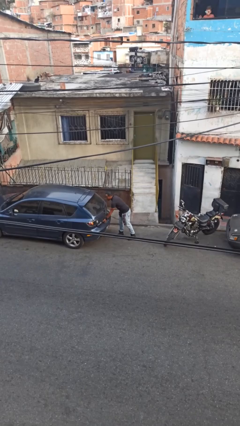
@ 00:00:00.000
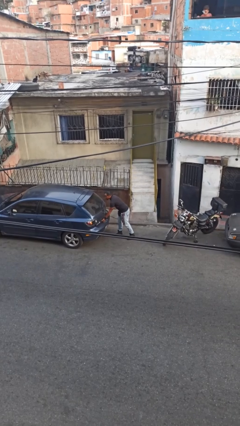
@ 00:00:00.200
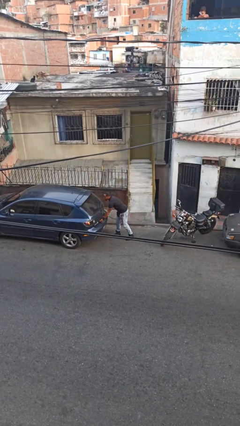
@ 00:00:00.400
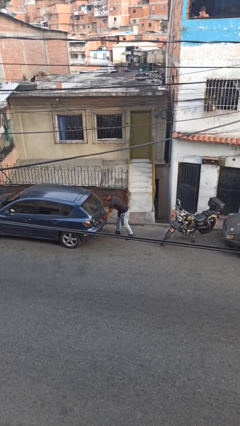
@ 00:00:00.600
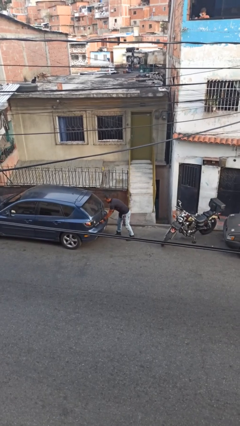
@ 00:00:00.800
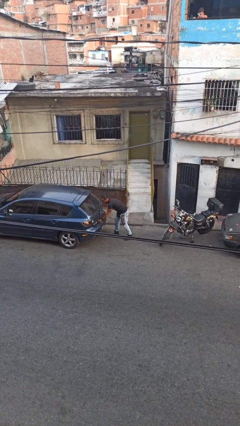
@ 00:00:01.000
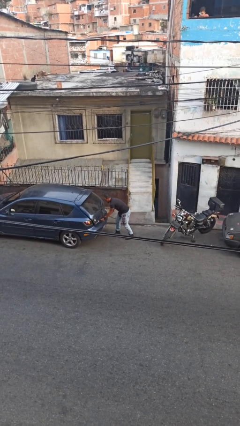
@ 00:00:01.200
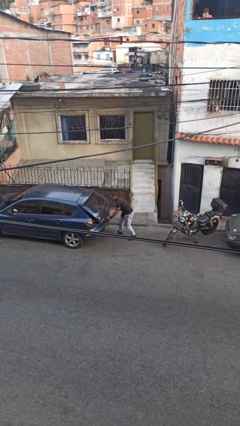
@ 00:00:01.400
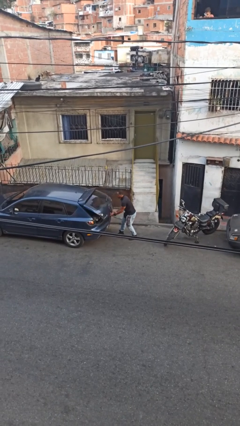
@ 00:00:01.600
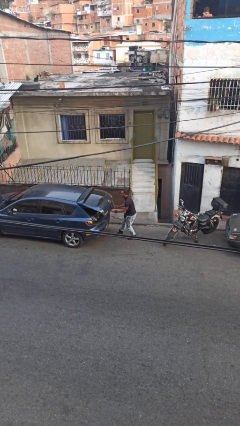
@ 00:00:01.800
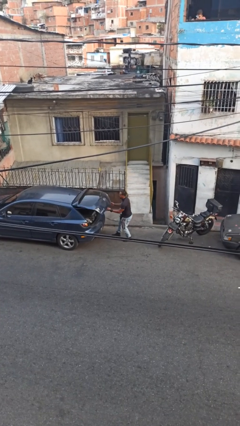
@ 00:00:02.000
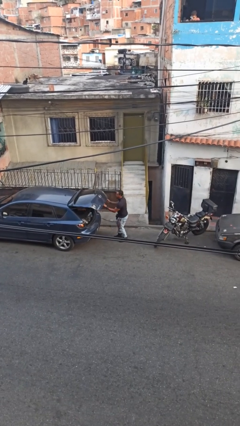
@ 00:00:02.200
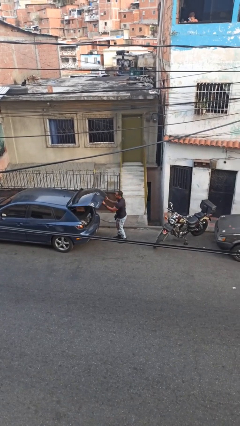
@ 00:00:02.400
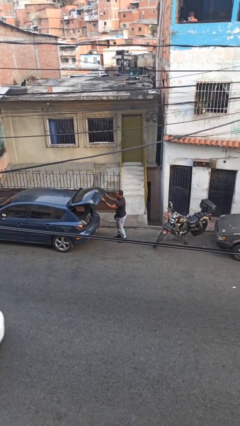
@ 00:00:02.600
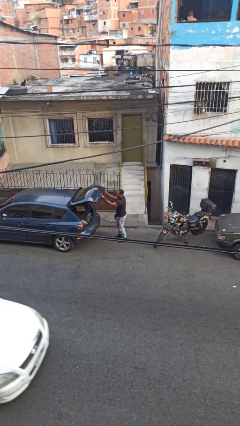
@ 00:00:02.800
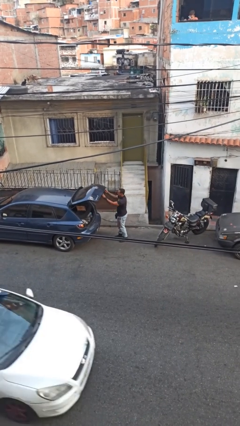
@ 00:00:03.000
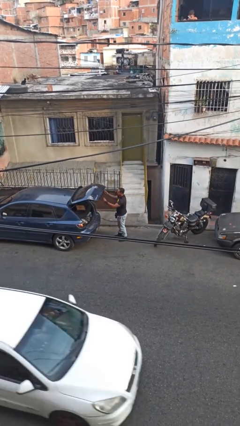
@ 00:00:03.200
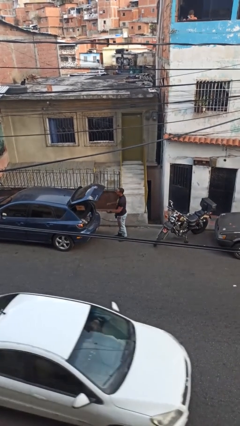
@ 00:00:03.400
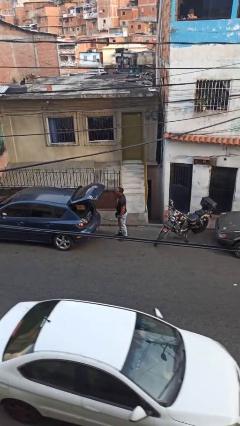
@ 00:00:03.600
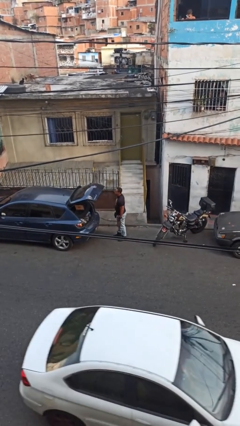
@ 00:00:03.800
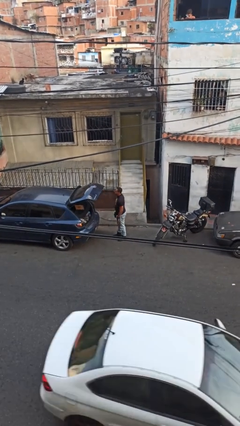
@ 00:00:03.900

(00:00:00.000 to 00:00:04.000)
person opens car trunk

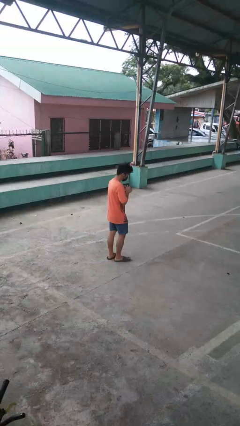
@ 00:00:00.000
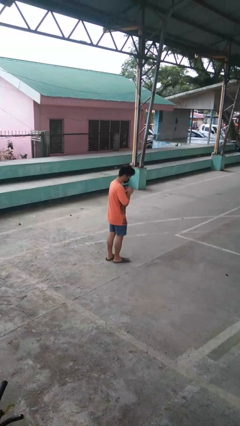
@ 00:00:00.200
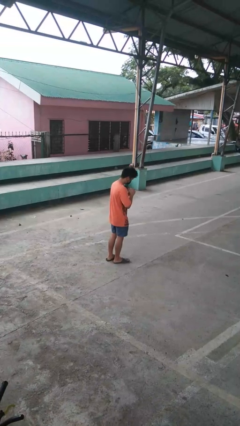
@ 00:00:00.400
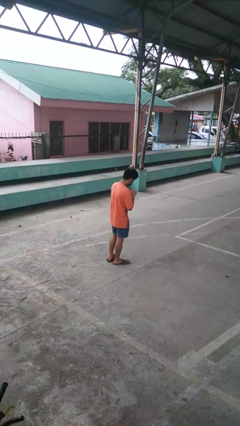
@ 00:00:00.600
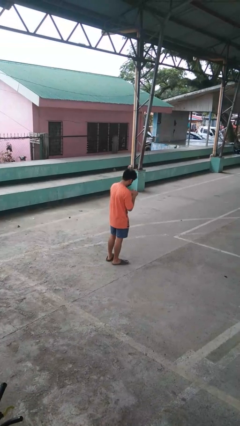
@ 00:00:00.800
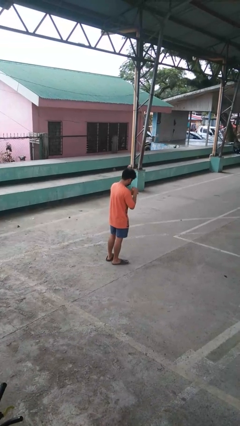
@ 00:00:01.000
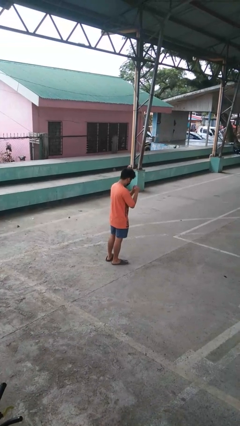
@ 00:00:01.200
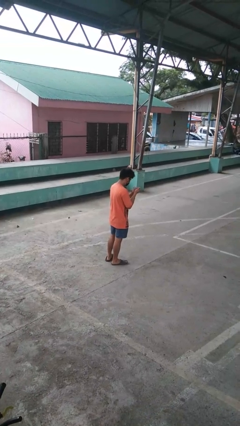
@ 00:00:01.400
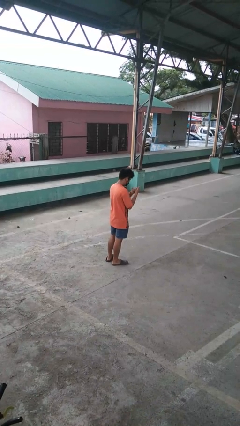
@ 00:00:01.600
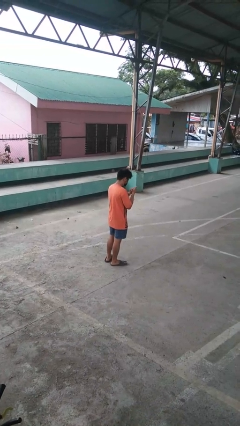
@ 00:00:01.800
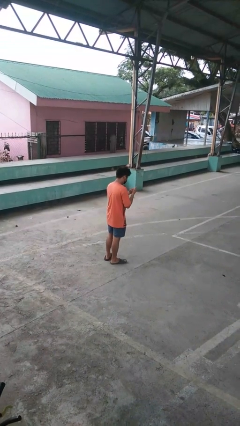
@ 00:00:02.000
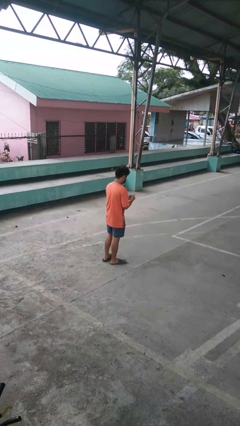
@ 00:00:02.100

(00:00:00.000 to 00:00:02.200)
person cracks knuckles

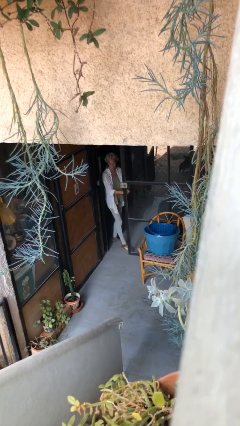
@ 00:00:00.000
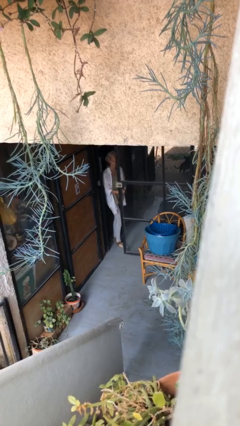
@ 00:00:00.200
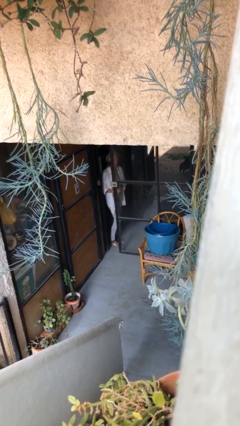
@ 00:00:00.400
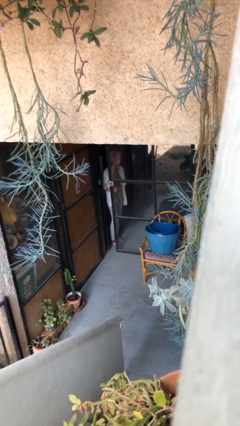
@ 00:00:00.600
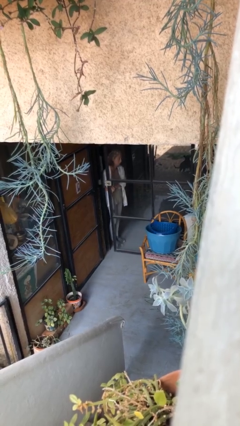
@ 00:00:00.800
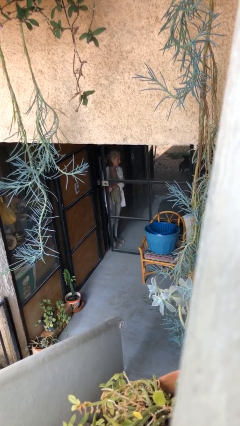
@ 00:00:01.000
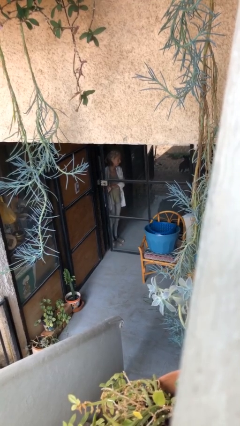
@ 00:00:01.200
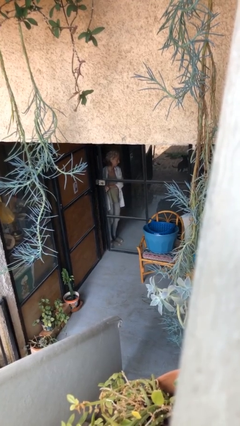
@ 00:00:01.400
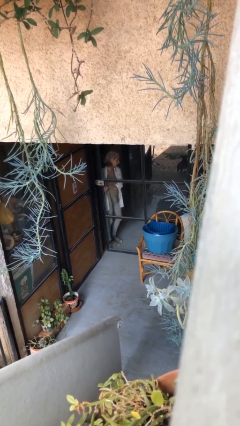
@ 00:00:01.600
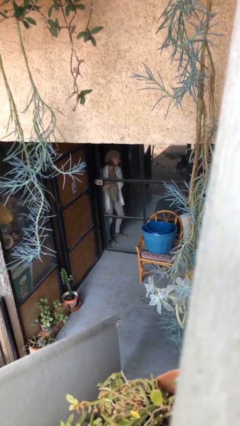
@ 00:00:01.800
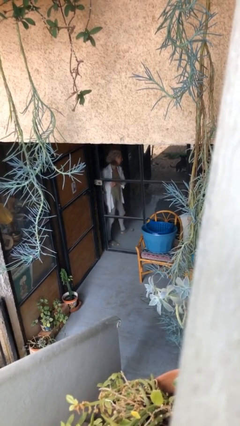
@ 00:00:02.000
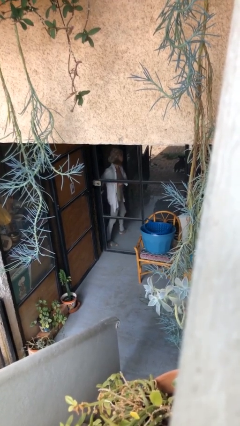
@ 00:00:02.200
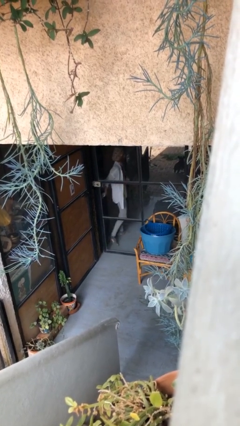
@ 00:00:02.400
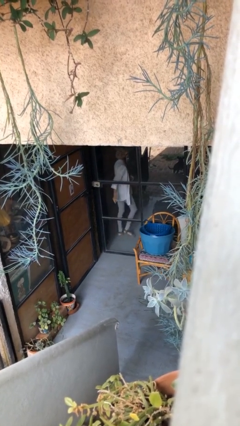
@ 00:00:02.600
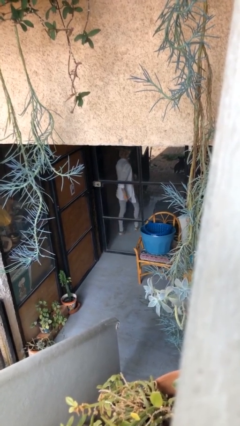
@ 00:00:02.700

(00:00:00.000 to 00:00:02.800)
person closes facility door

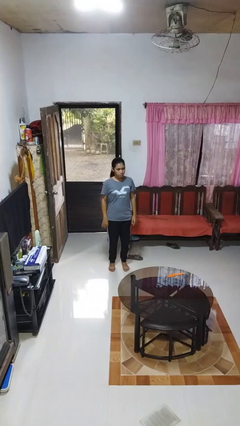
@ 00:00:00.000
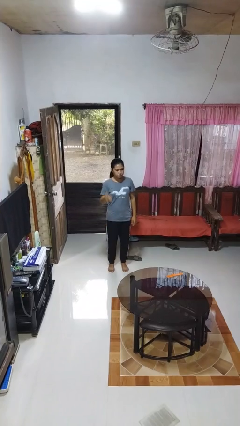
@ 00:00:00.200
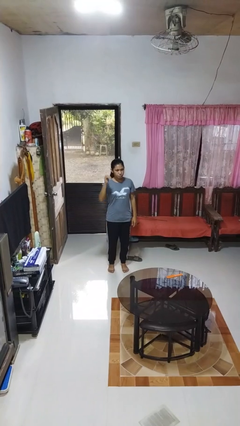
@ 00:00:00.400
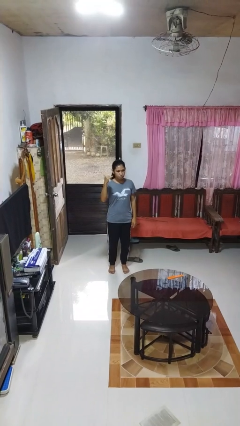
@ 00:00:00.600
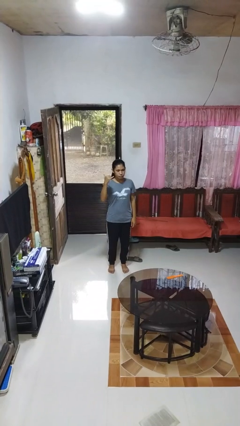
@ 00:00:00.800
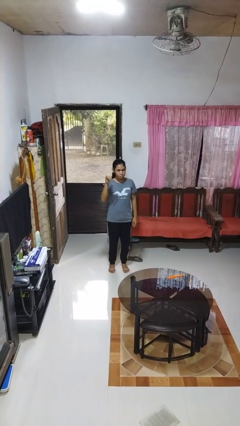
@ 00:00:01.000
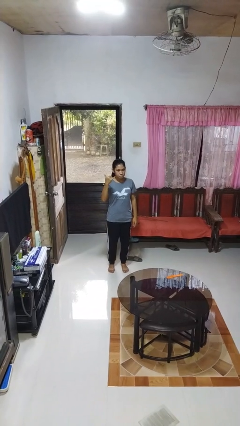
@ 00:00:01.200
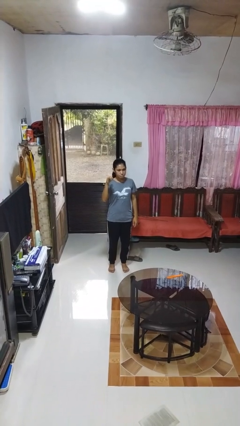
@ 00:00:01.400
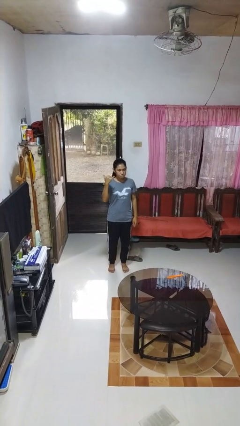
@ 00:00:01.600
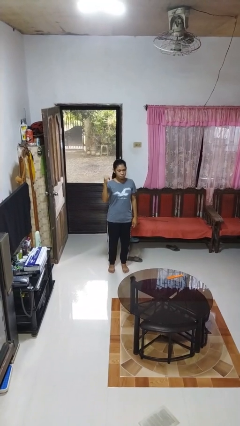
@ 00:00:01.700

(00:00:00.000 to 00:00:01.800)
person gestures hang loose

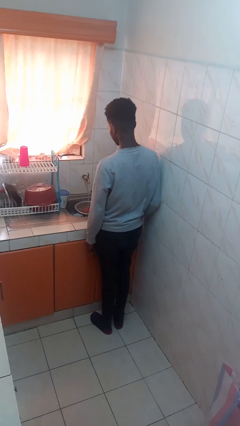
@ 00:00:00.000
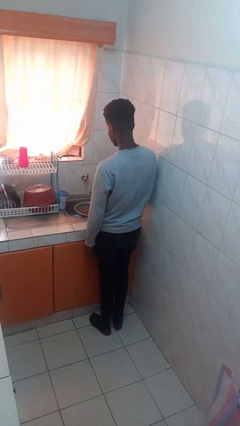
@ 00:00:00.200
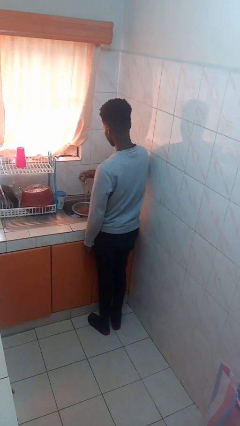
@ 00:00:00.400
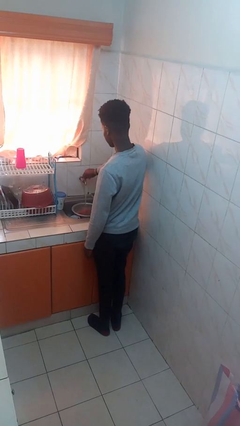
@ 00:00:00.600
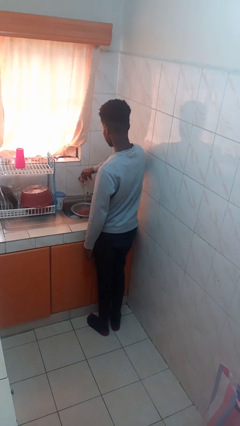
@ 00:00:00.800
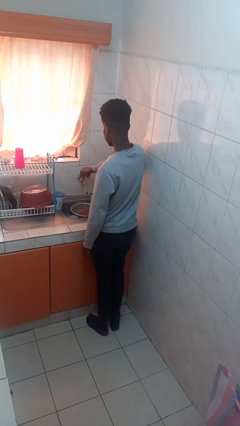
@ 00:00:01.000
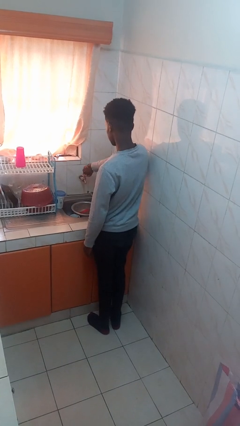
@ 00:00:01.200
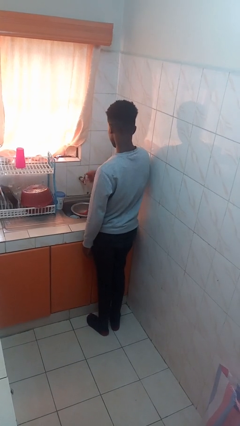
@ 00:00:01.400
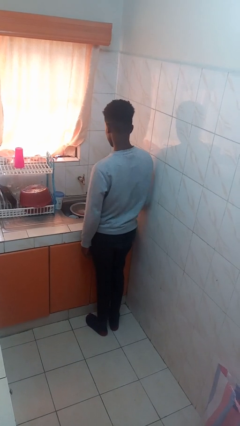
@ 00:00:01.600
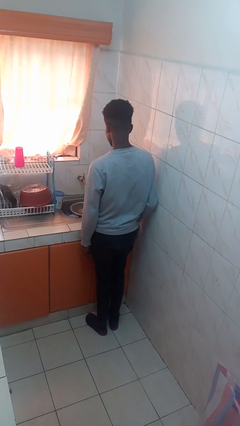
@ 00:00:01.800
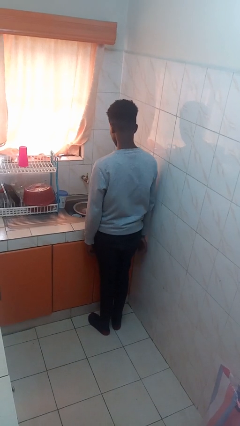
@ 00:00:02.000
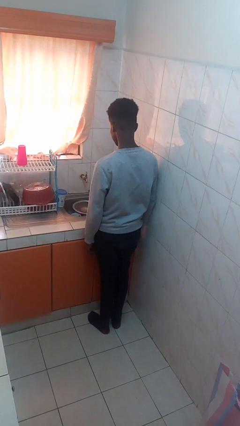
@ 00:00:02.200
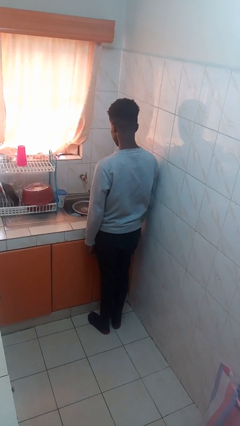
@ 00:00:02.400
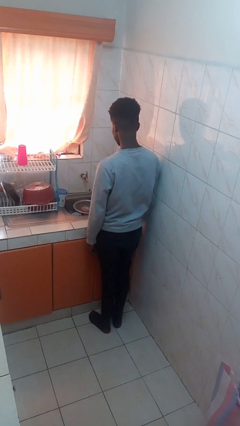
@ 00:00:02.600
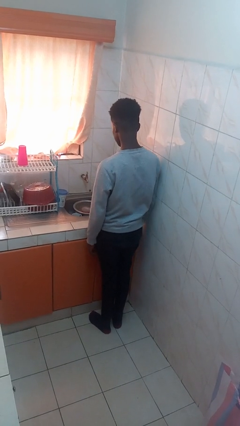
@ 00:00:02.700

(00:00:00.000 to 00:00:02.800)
person turns off faucet

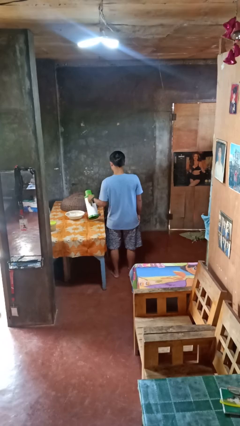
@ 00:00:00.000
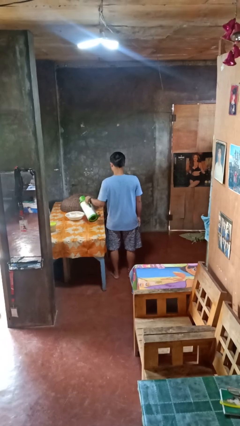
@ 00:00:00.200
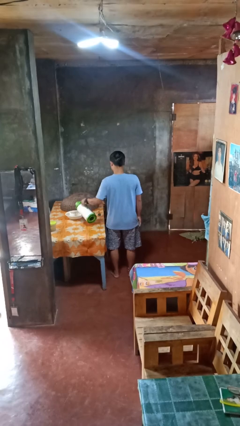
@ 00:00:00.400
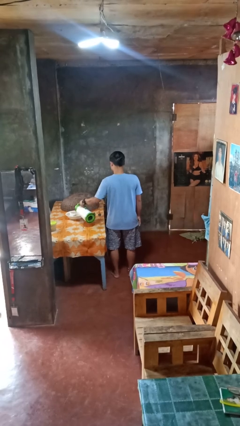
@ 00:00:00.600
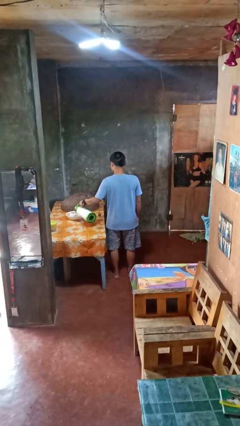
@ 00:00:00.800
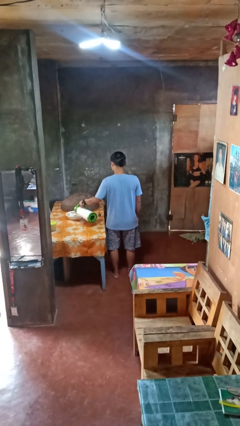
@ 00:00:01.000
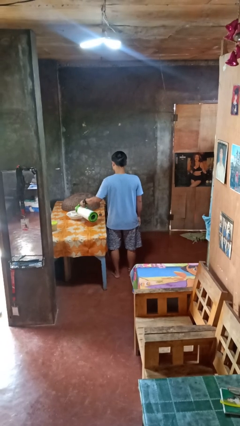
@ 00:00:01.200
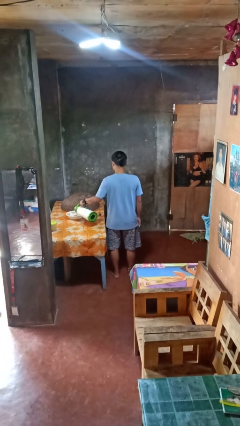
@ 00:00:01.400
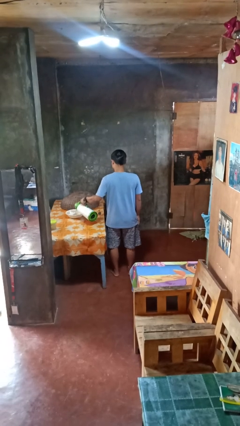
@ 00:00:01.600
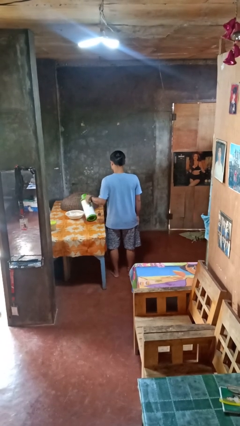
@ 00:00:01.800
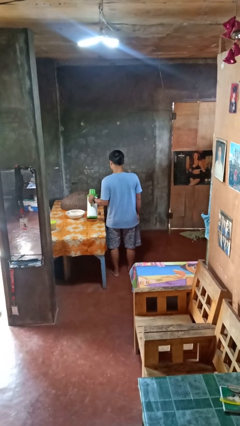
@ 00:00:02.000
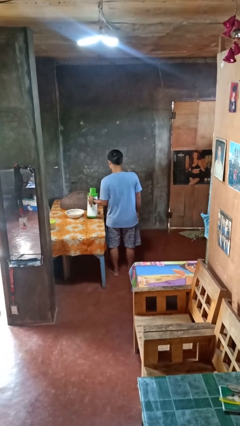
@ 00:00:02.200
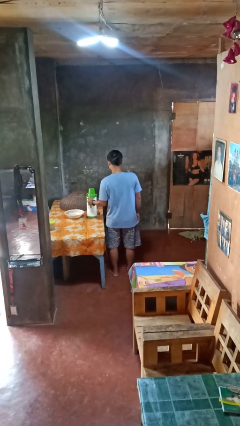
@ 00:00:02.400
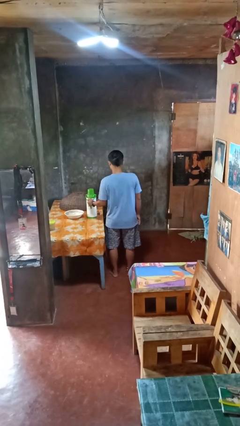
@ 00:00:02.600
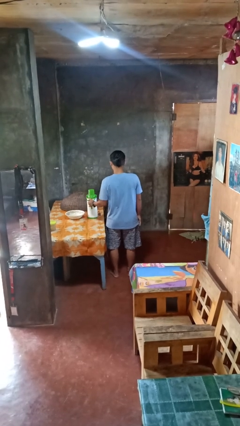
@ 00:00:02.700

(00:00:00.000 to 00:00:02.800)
person pours into bowl

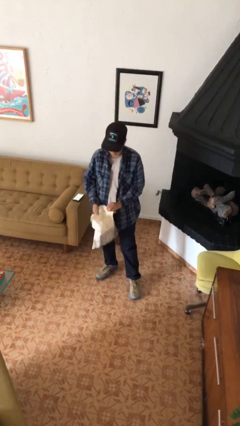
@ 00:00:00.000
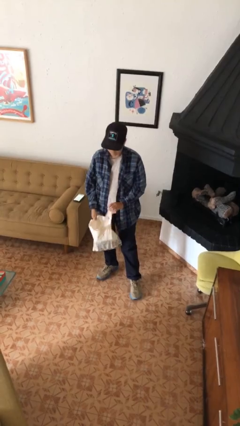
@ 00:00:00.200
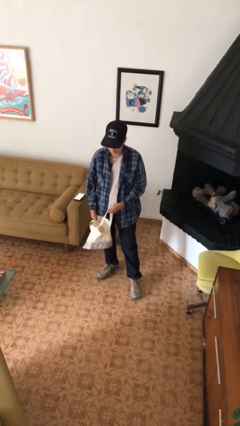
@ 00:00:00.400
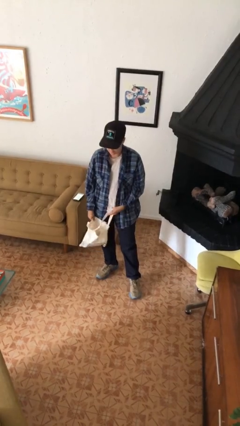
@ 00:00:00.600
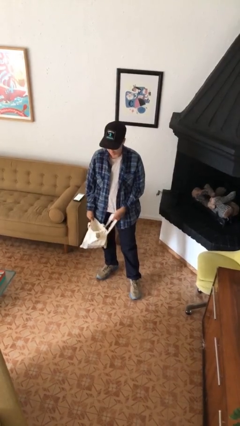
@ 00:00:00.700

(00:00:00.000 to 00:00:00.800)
person searches in bag
